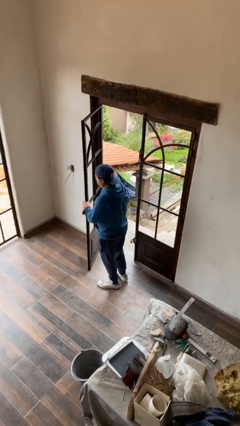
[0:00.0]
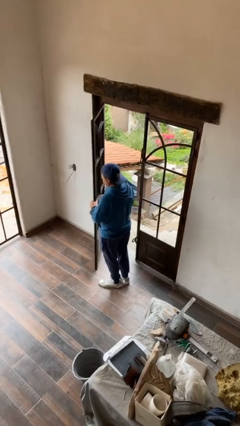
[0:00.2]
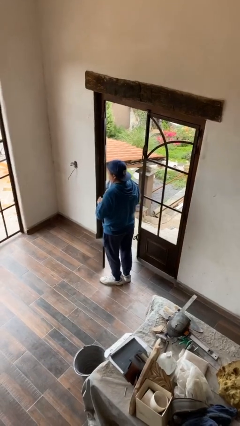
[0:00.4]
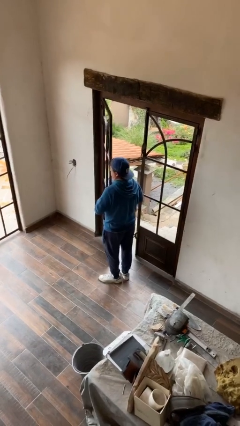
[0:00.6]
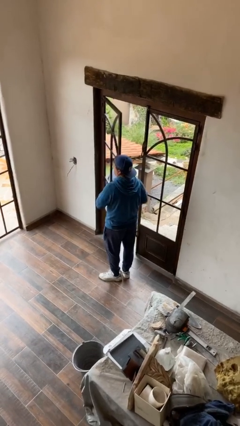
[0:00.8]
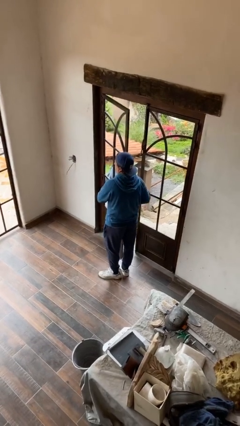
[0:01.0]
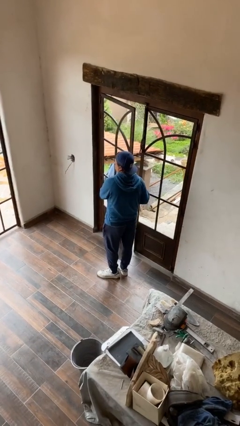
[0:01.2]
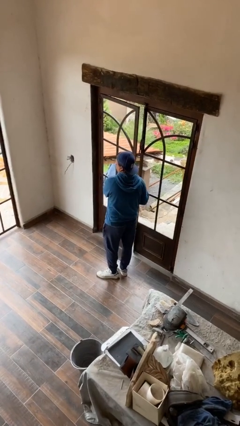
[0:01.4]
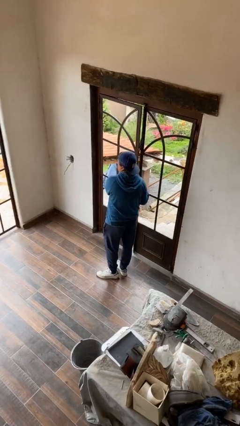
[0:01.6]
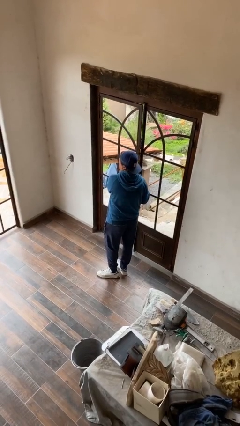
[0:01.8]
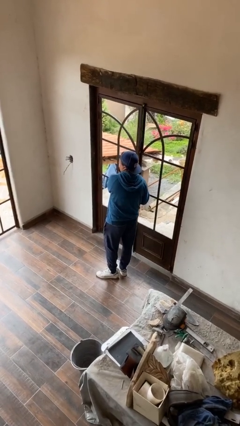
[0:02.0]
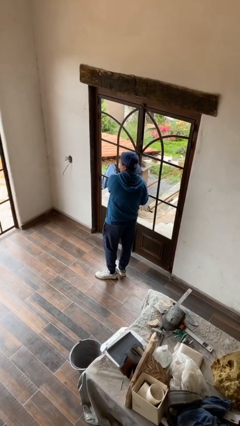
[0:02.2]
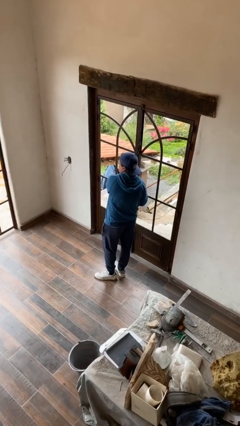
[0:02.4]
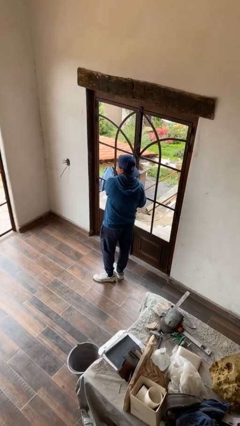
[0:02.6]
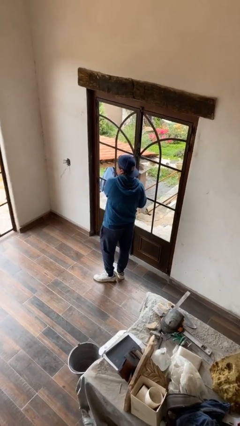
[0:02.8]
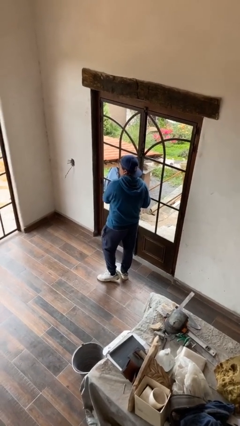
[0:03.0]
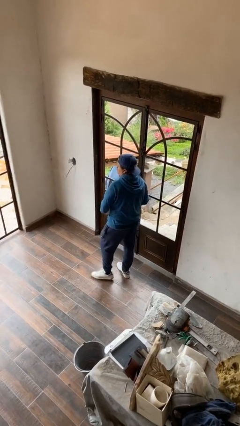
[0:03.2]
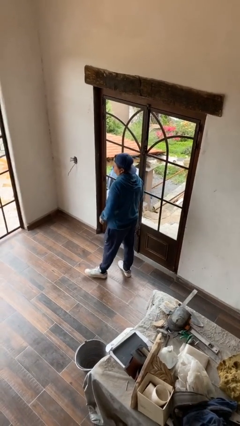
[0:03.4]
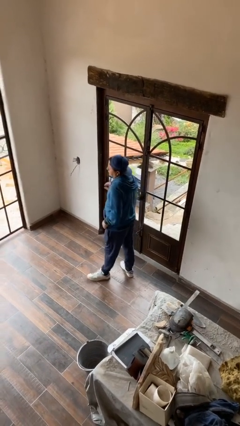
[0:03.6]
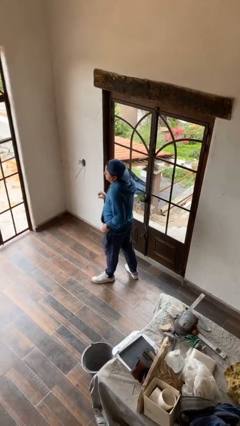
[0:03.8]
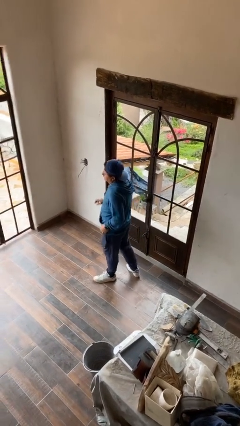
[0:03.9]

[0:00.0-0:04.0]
person closes facility door

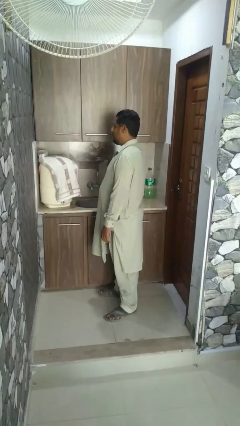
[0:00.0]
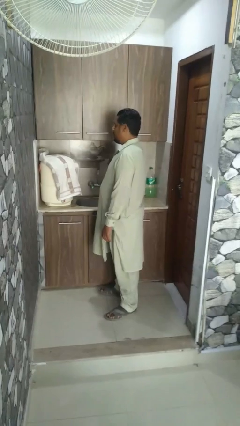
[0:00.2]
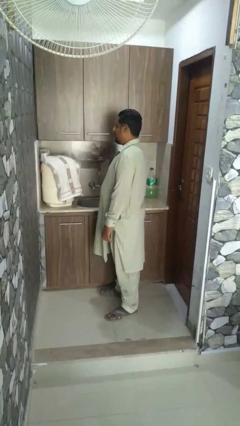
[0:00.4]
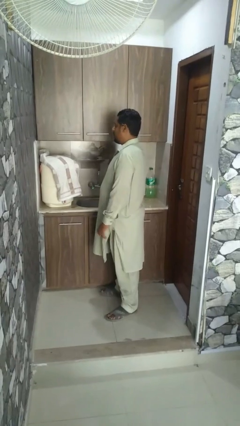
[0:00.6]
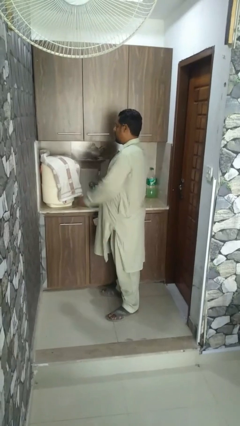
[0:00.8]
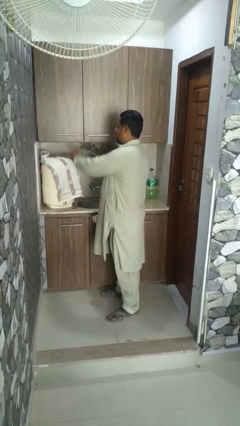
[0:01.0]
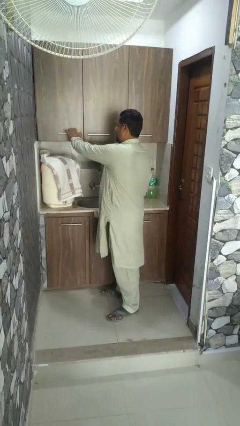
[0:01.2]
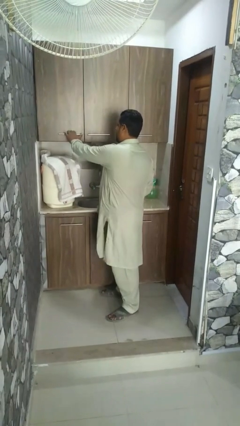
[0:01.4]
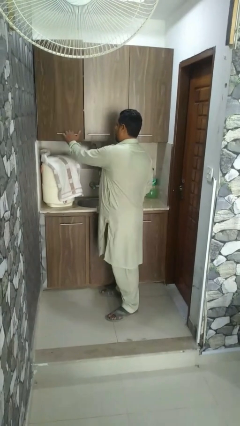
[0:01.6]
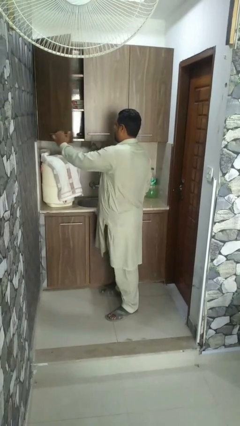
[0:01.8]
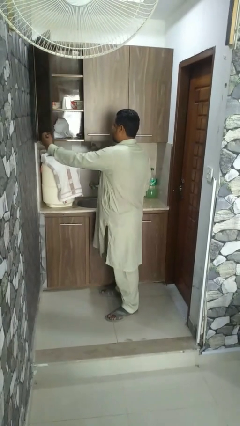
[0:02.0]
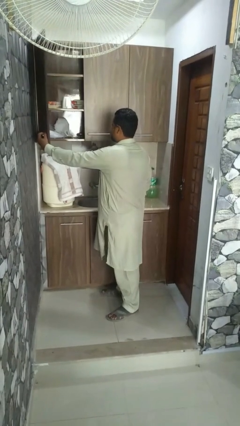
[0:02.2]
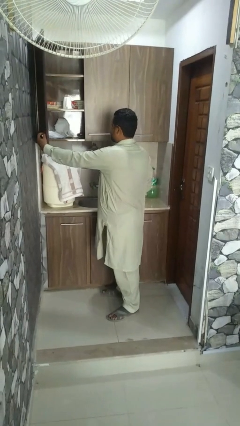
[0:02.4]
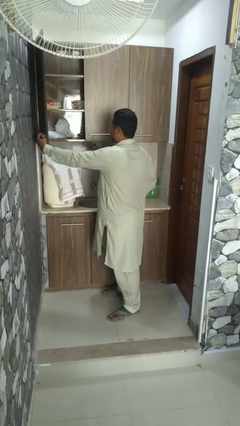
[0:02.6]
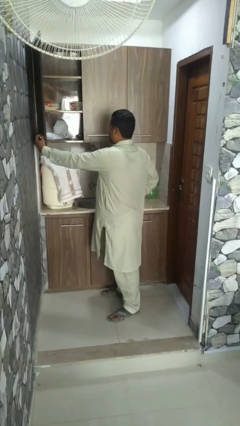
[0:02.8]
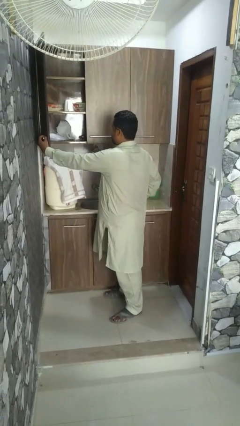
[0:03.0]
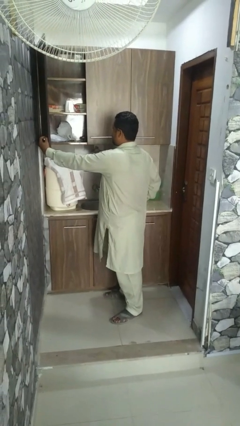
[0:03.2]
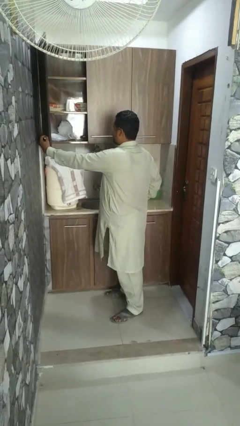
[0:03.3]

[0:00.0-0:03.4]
person opens microwave

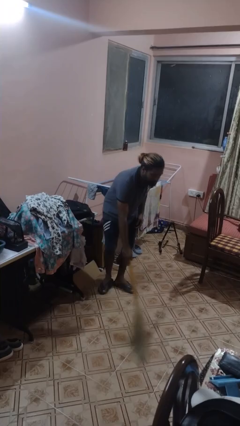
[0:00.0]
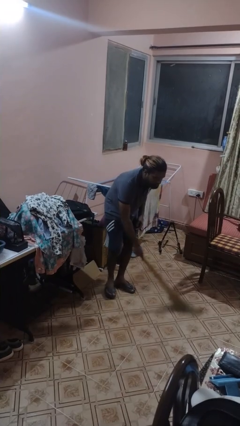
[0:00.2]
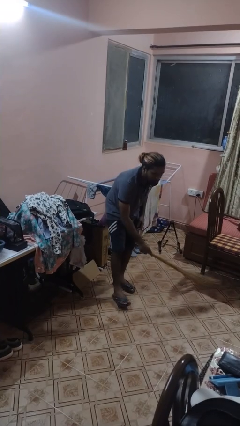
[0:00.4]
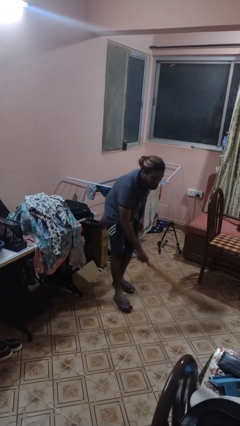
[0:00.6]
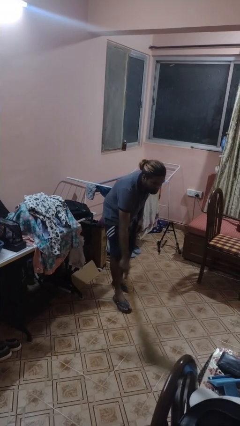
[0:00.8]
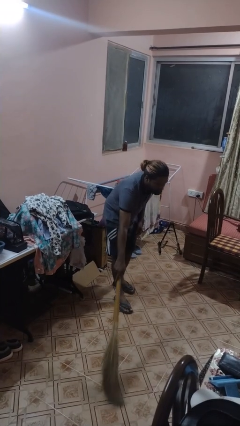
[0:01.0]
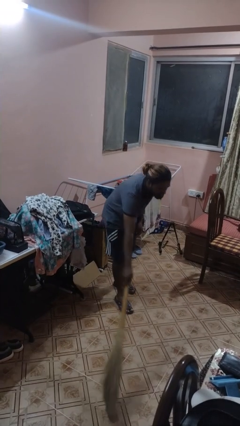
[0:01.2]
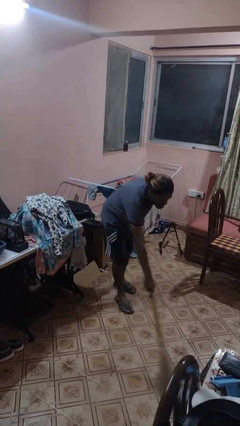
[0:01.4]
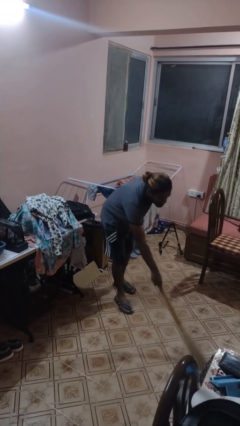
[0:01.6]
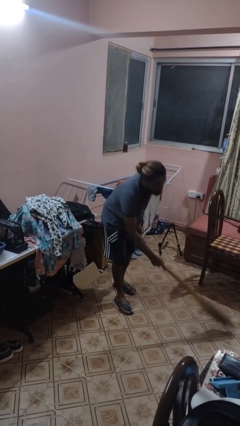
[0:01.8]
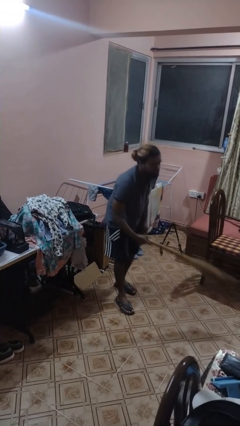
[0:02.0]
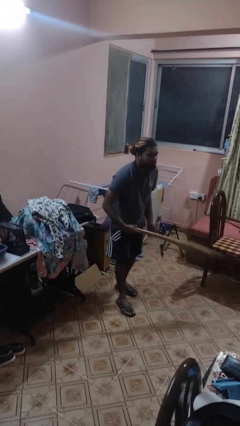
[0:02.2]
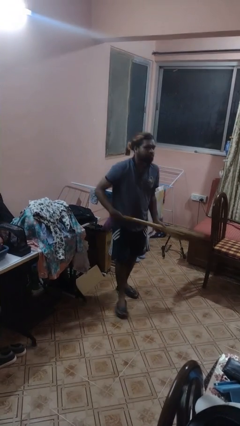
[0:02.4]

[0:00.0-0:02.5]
person sweeps floor

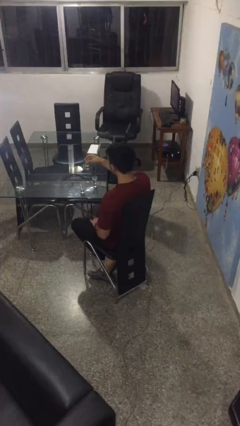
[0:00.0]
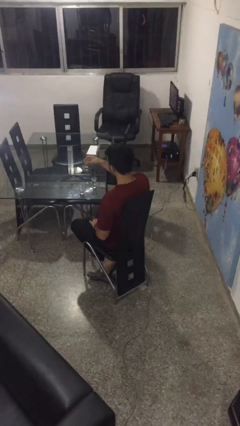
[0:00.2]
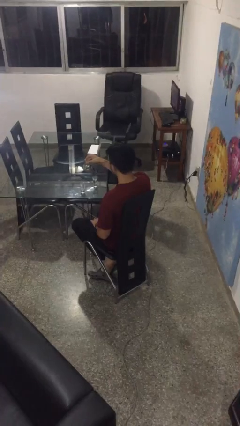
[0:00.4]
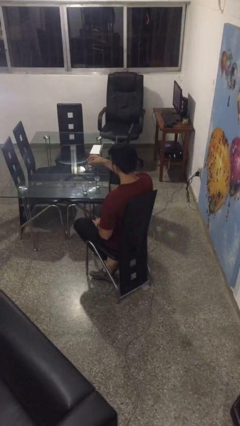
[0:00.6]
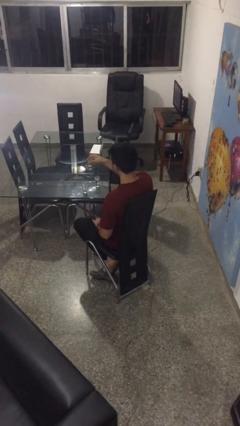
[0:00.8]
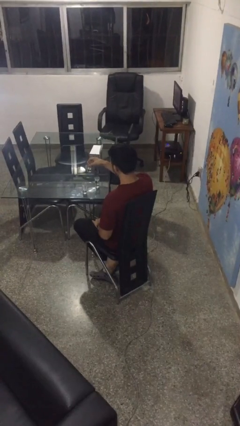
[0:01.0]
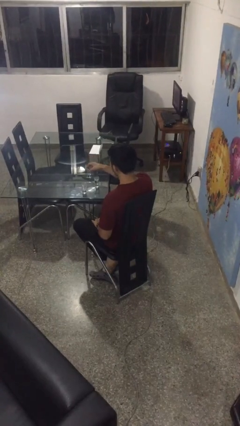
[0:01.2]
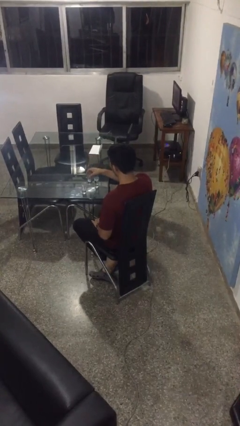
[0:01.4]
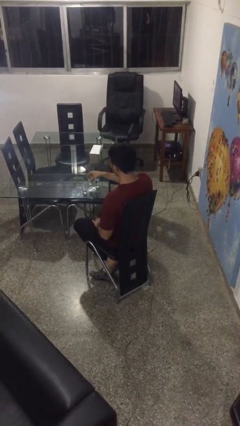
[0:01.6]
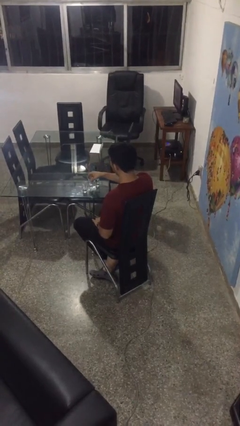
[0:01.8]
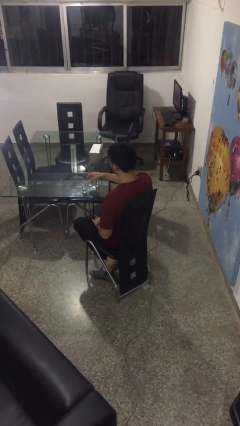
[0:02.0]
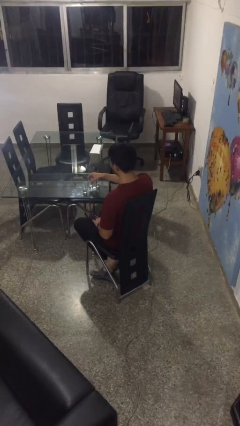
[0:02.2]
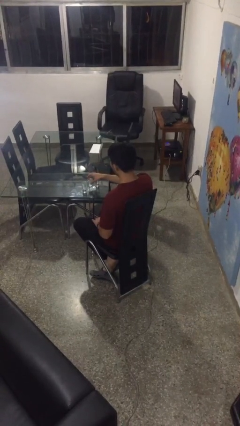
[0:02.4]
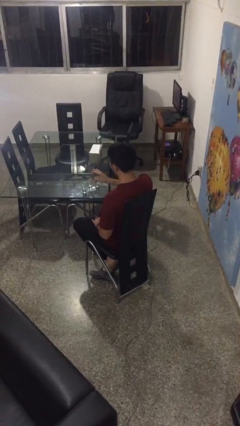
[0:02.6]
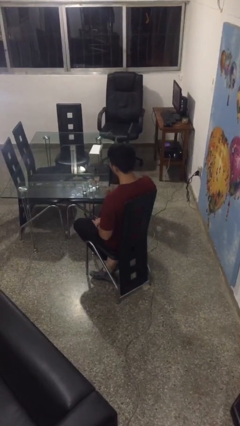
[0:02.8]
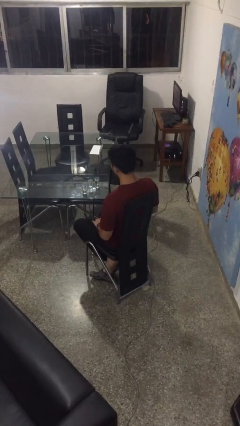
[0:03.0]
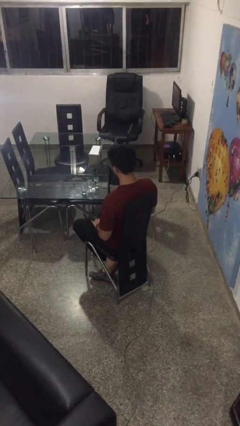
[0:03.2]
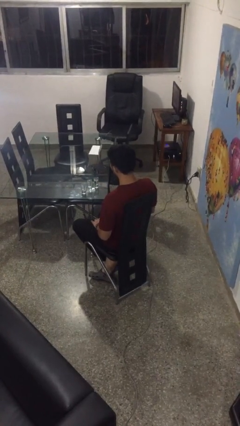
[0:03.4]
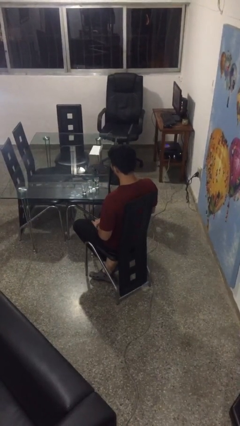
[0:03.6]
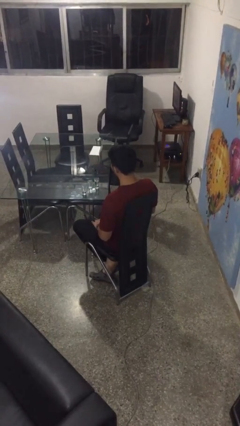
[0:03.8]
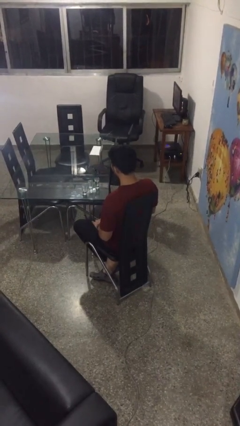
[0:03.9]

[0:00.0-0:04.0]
person puts down object on table

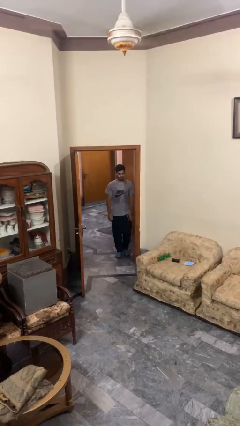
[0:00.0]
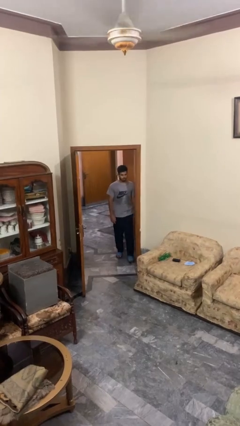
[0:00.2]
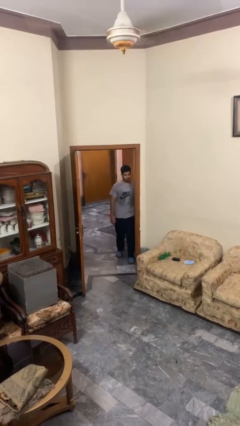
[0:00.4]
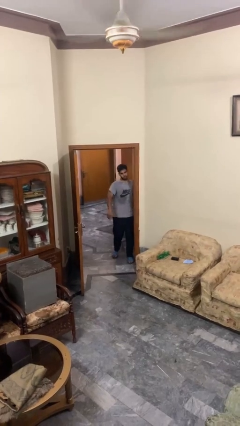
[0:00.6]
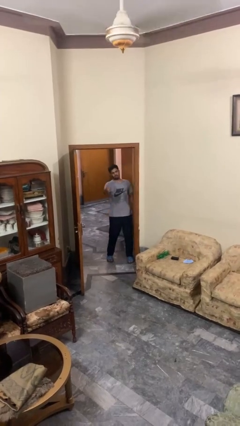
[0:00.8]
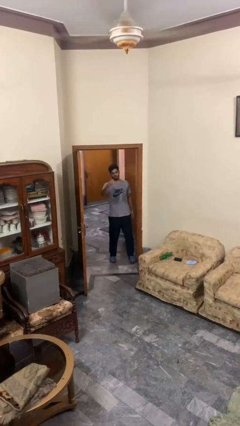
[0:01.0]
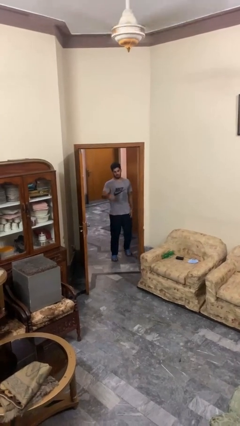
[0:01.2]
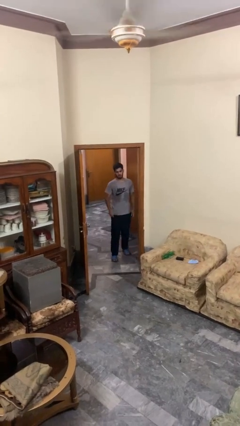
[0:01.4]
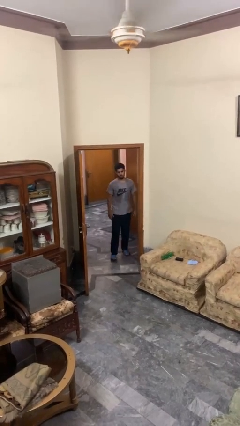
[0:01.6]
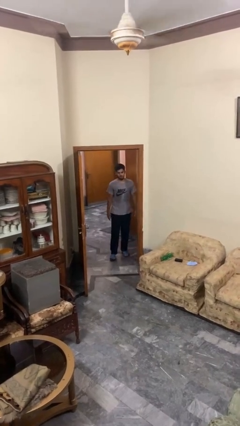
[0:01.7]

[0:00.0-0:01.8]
person bumps into wall

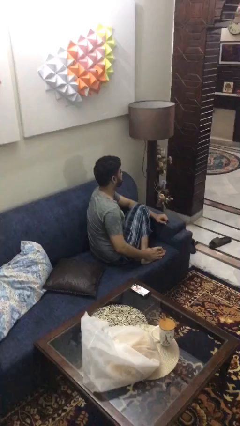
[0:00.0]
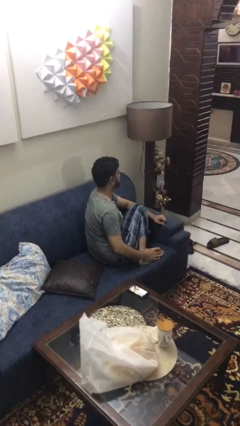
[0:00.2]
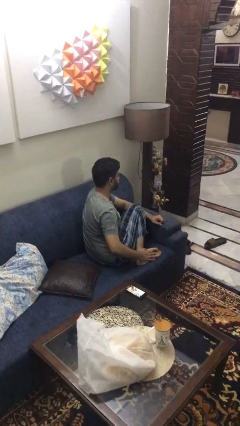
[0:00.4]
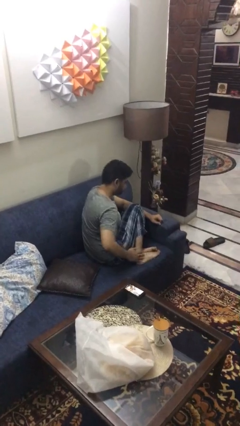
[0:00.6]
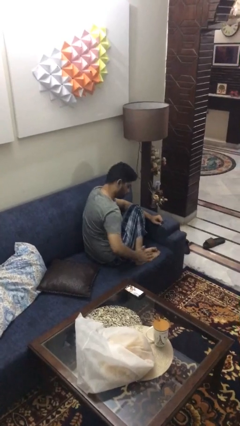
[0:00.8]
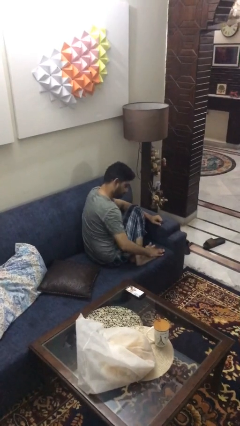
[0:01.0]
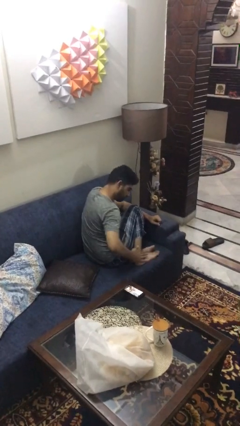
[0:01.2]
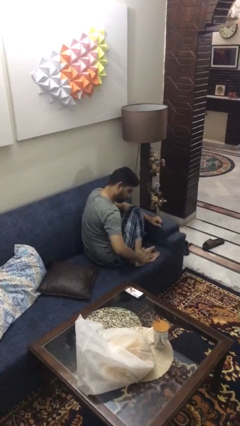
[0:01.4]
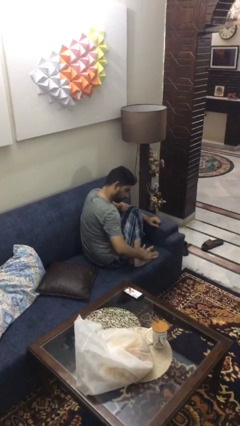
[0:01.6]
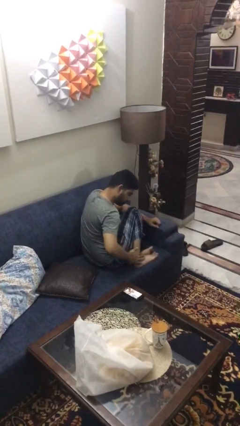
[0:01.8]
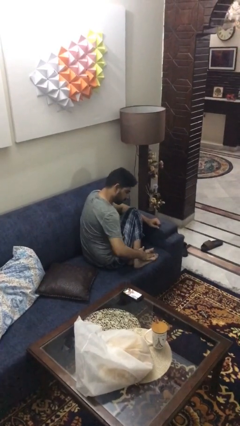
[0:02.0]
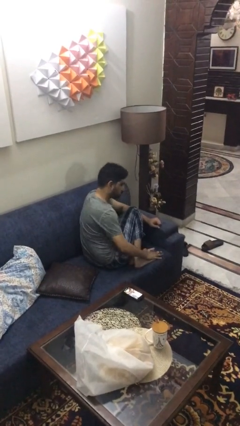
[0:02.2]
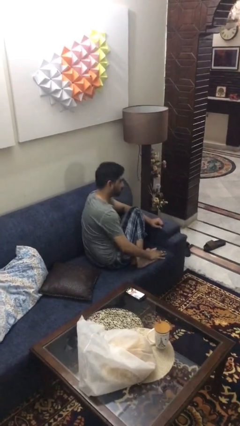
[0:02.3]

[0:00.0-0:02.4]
person rubs foot
